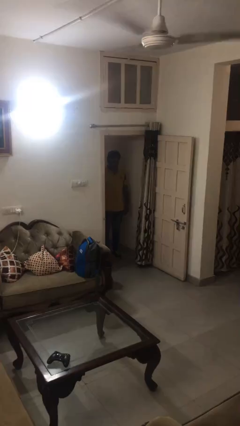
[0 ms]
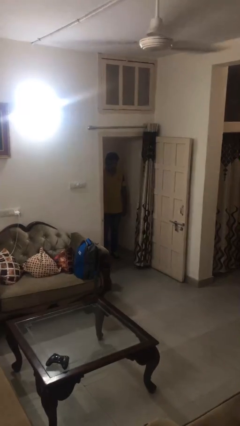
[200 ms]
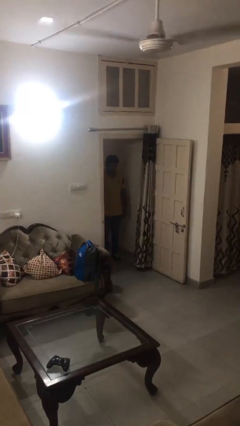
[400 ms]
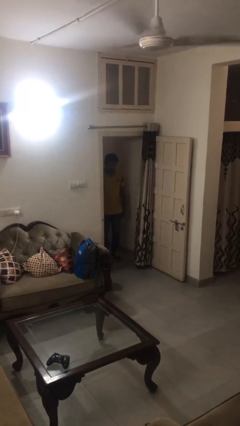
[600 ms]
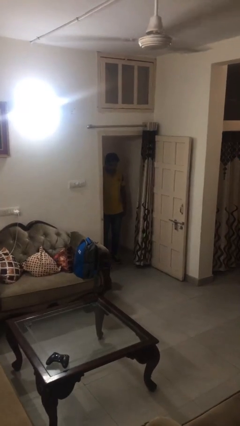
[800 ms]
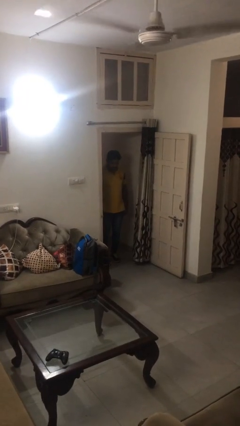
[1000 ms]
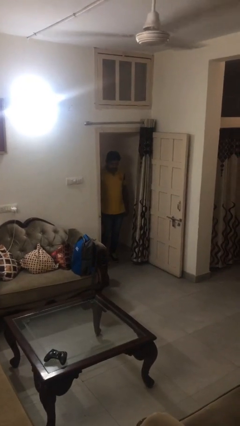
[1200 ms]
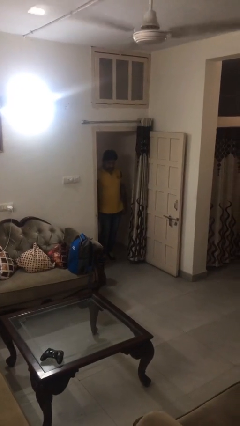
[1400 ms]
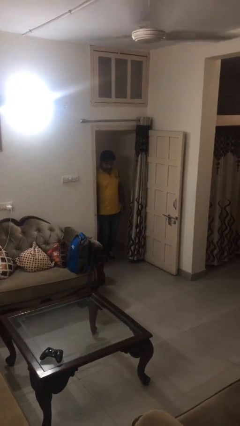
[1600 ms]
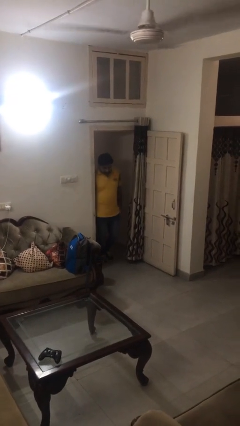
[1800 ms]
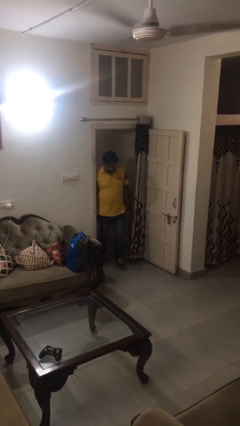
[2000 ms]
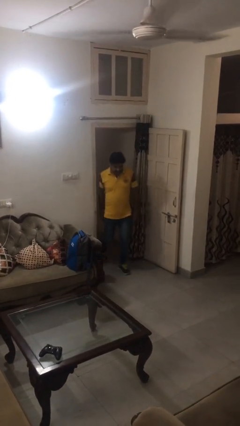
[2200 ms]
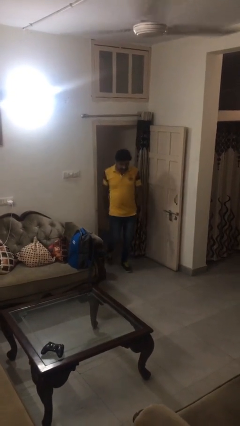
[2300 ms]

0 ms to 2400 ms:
person bumps into wall

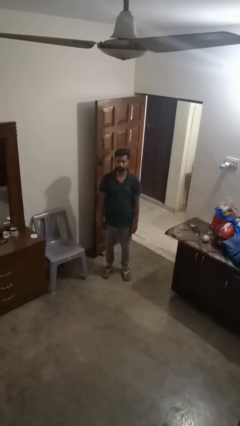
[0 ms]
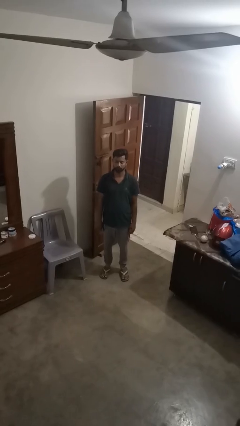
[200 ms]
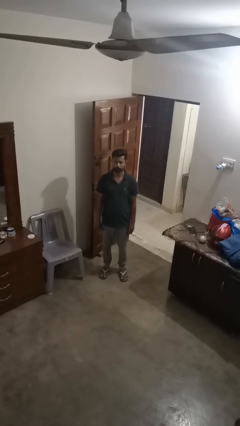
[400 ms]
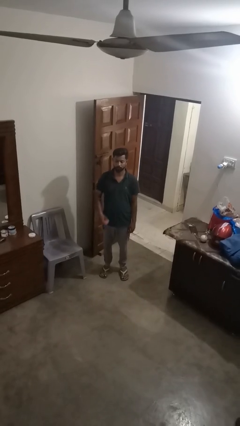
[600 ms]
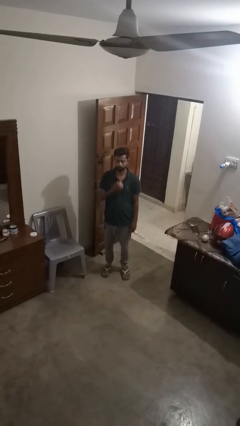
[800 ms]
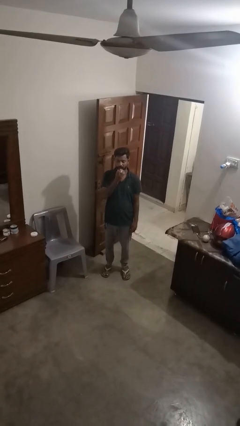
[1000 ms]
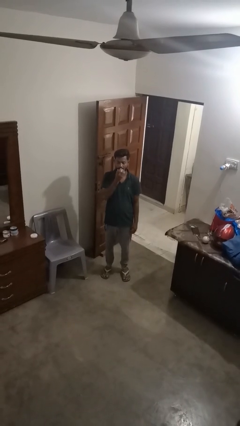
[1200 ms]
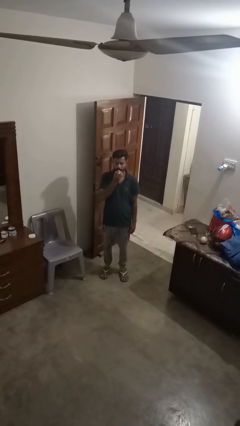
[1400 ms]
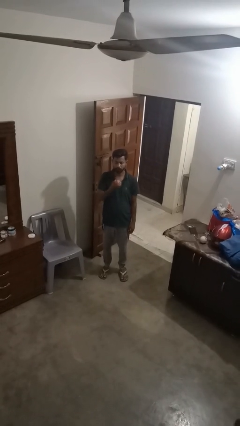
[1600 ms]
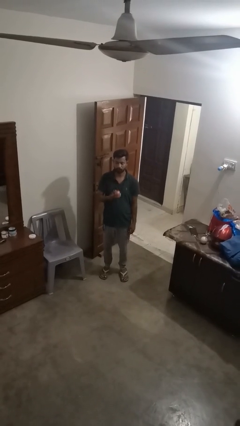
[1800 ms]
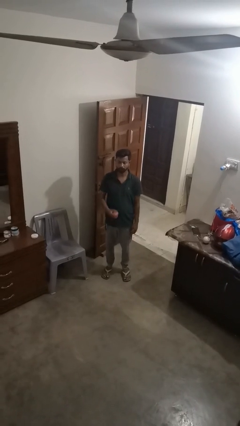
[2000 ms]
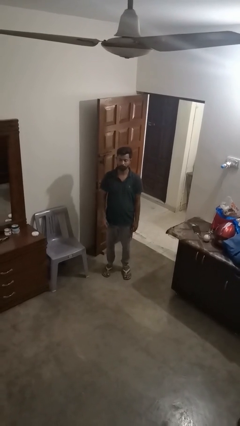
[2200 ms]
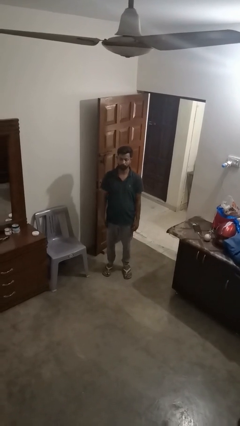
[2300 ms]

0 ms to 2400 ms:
person eats apple

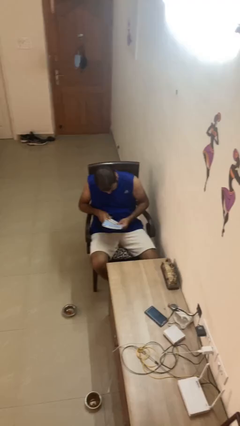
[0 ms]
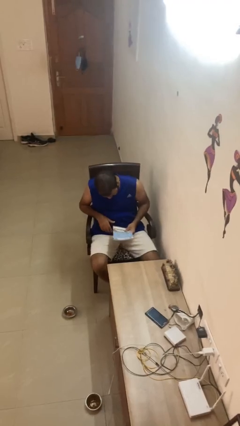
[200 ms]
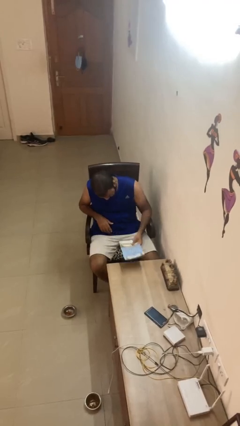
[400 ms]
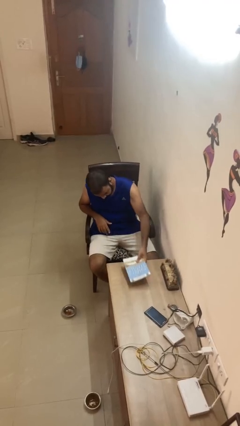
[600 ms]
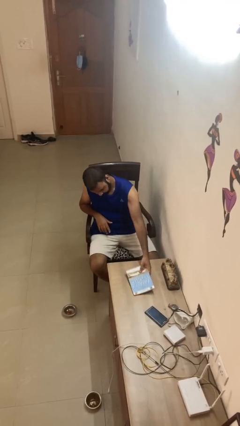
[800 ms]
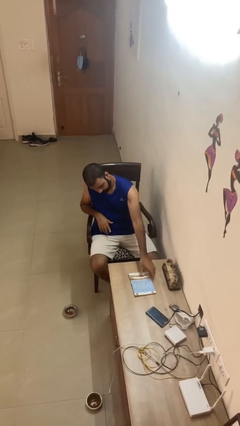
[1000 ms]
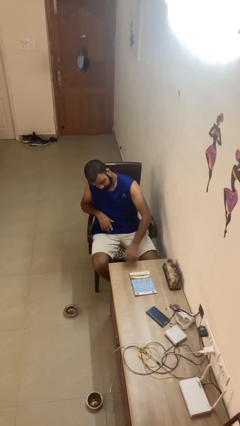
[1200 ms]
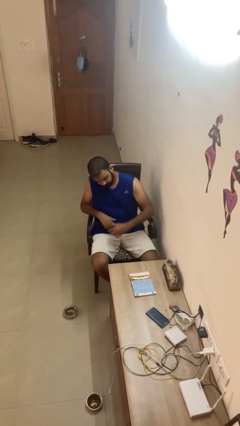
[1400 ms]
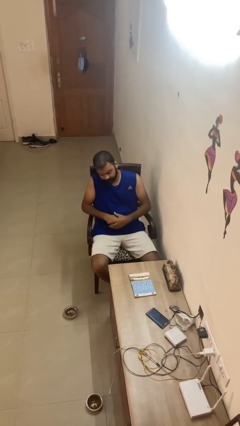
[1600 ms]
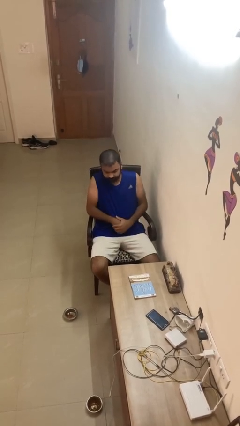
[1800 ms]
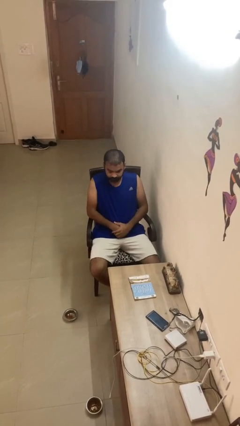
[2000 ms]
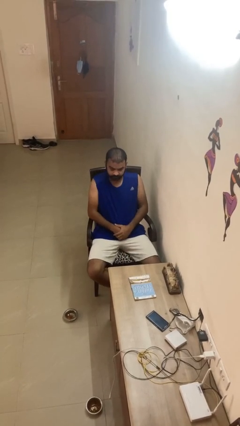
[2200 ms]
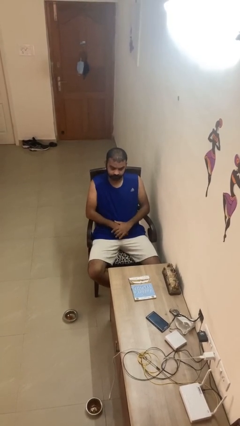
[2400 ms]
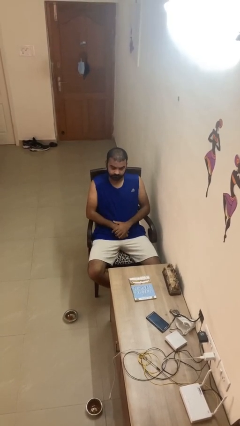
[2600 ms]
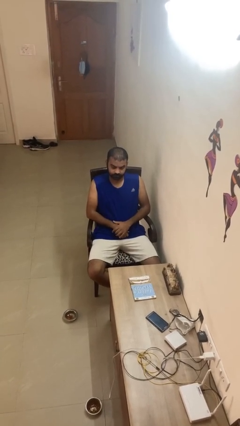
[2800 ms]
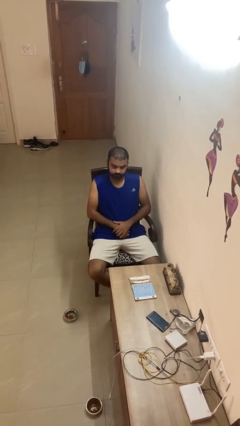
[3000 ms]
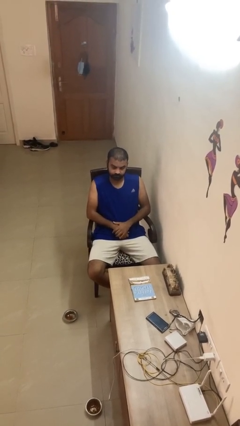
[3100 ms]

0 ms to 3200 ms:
person puts down object on table

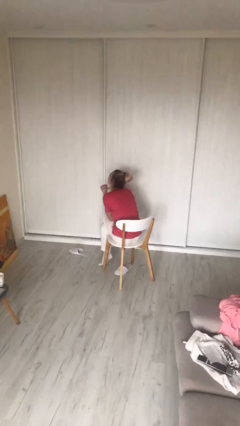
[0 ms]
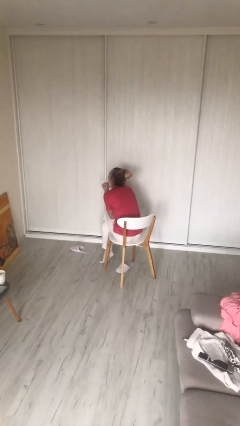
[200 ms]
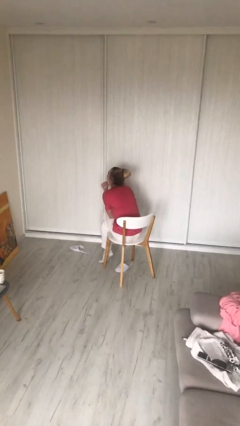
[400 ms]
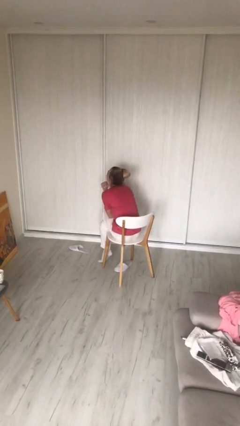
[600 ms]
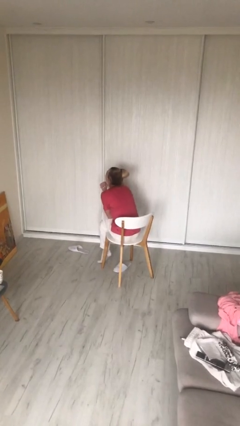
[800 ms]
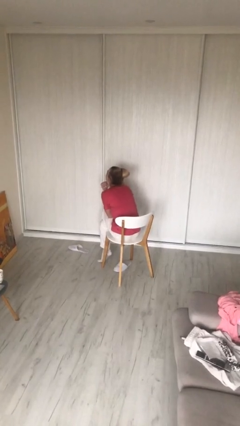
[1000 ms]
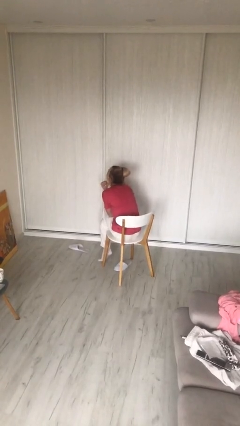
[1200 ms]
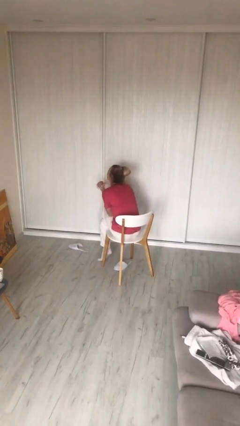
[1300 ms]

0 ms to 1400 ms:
person strokes chin

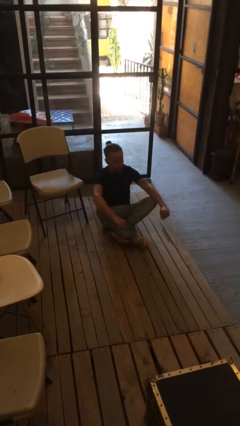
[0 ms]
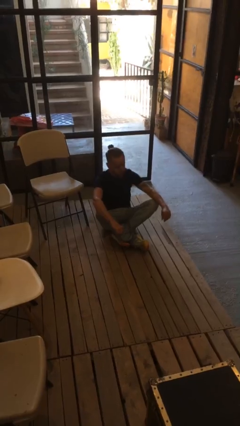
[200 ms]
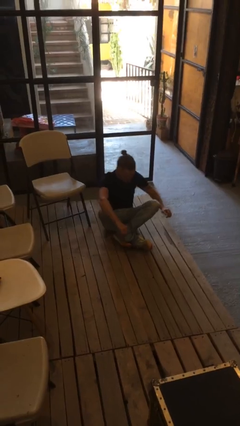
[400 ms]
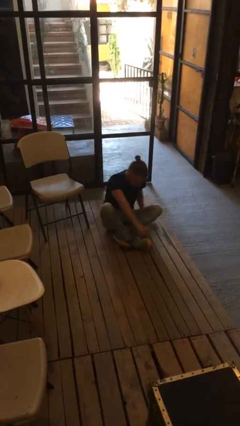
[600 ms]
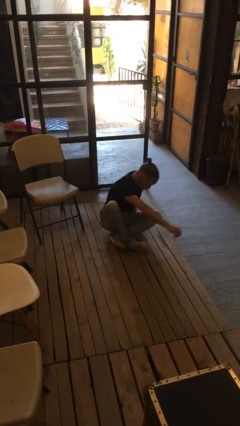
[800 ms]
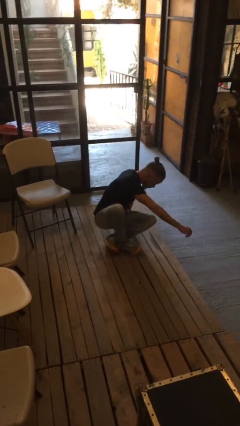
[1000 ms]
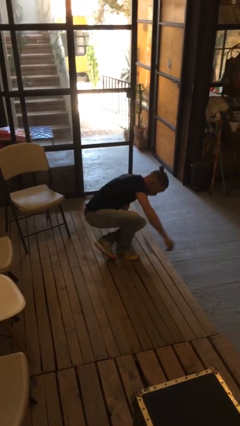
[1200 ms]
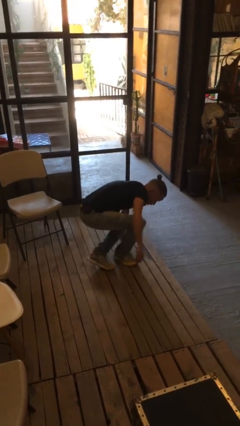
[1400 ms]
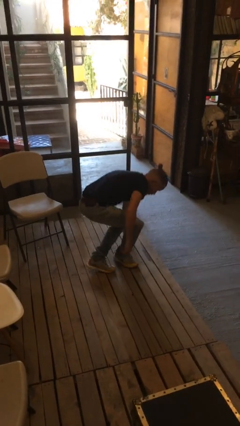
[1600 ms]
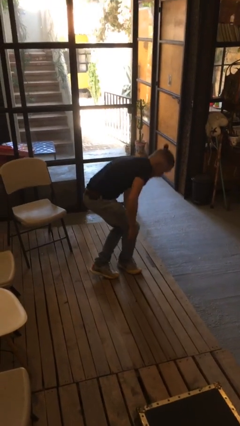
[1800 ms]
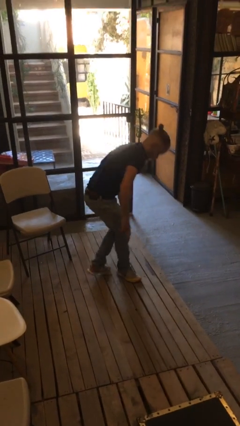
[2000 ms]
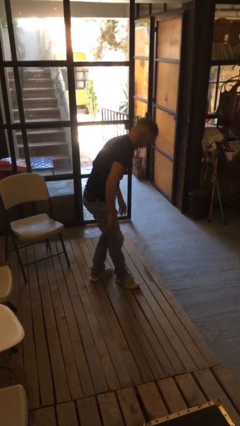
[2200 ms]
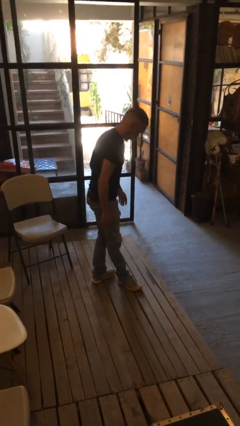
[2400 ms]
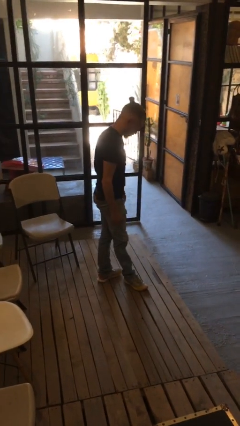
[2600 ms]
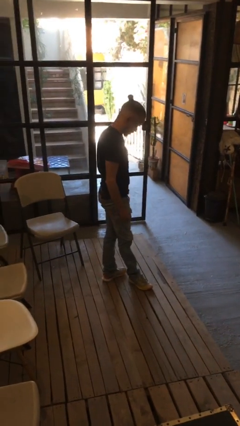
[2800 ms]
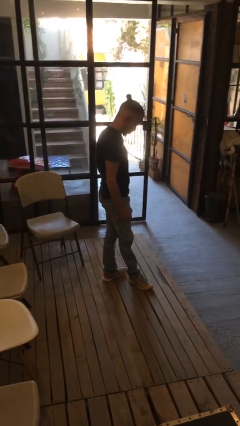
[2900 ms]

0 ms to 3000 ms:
person stands up from floor

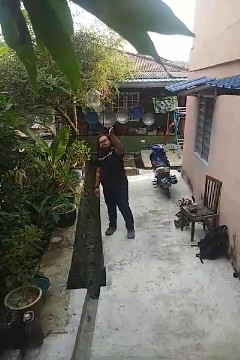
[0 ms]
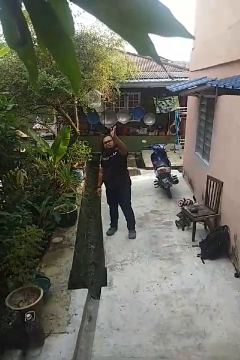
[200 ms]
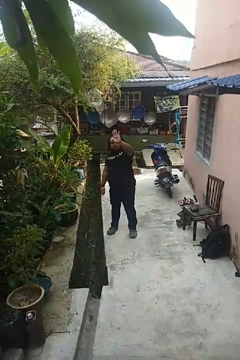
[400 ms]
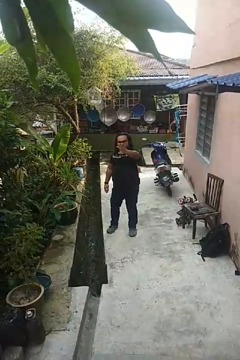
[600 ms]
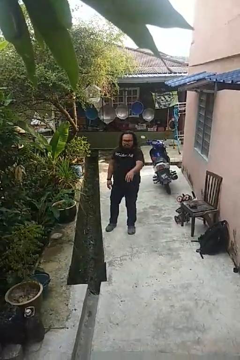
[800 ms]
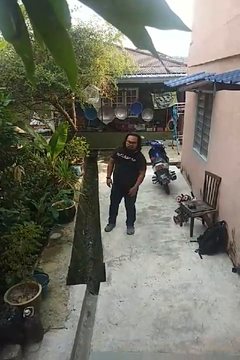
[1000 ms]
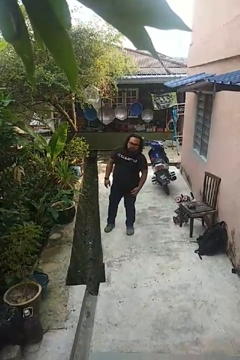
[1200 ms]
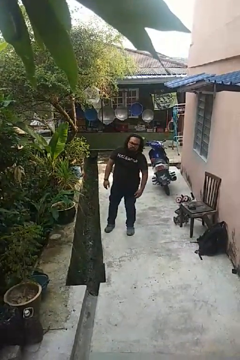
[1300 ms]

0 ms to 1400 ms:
person gestures swipe down

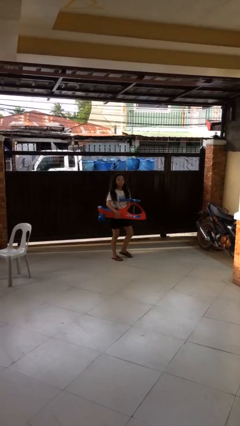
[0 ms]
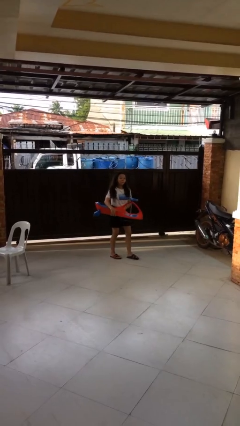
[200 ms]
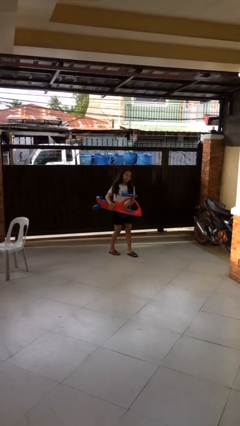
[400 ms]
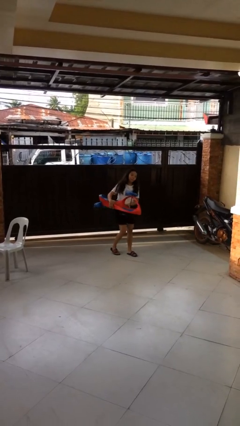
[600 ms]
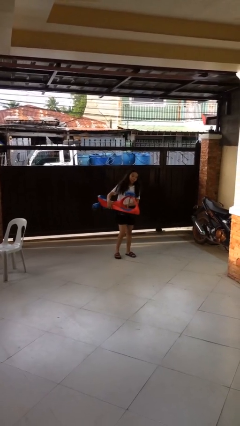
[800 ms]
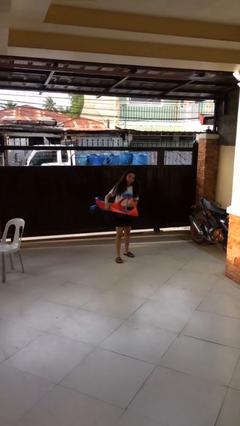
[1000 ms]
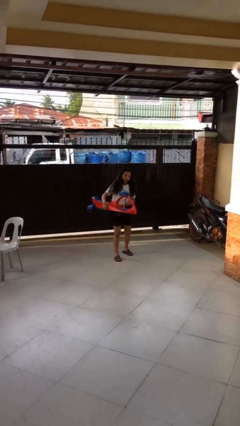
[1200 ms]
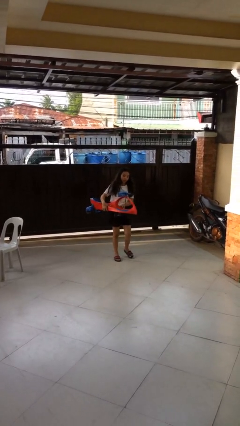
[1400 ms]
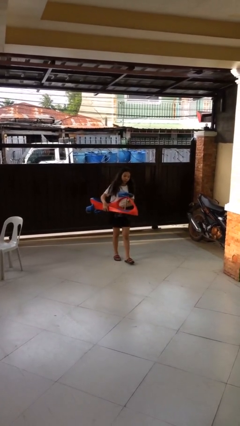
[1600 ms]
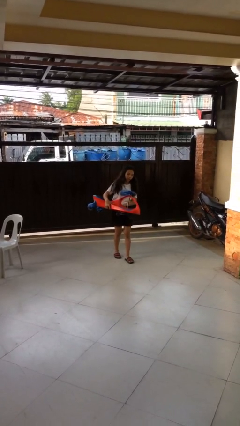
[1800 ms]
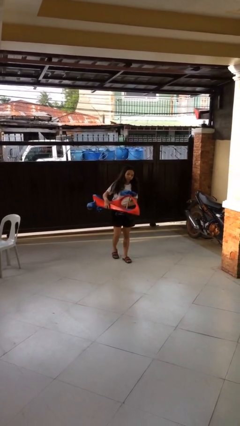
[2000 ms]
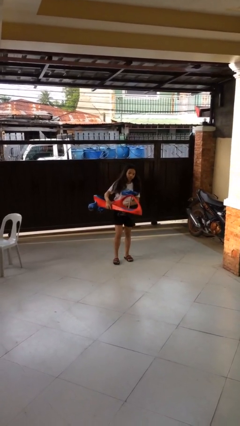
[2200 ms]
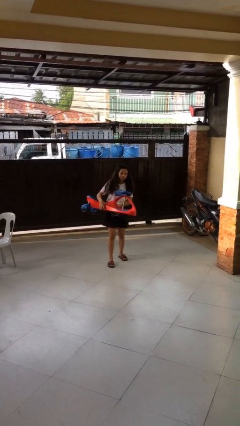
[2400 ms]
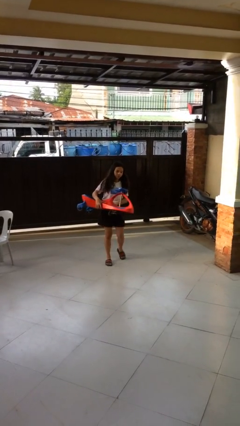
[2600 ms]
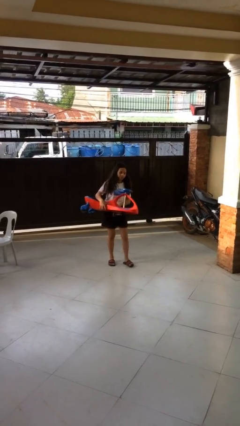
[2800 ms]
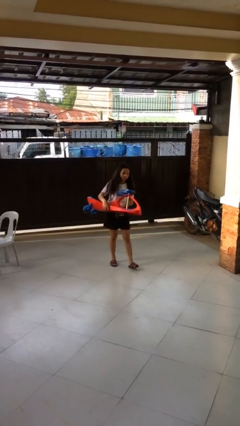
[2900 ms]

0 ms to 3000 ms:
person carries heavy object

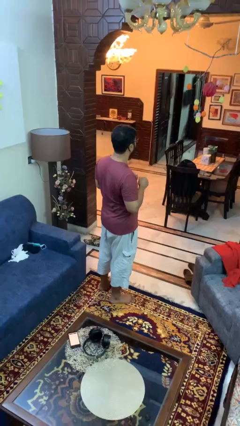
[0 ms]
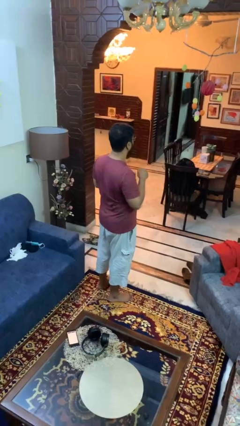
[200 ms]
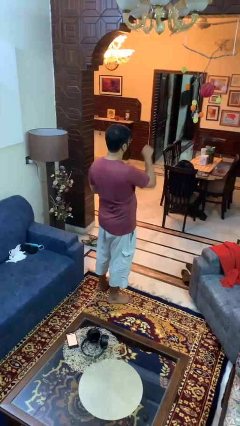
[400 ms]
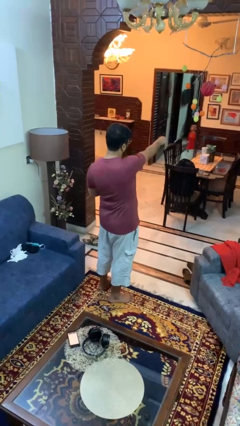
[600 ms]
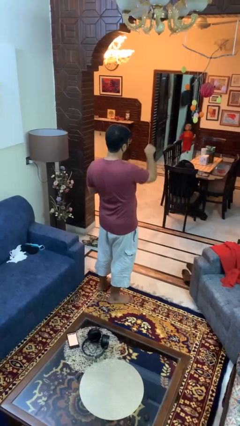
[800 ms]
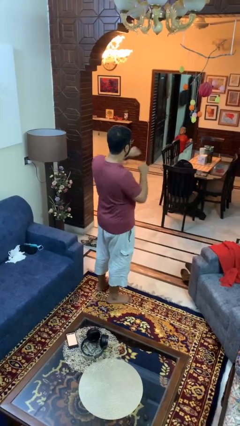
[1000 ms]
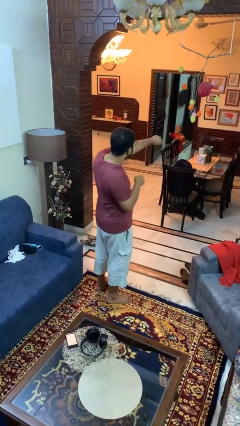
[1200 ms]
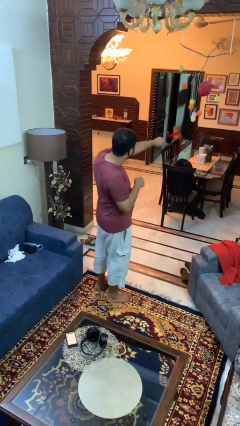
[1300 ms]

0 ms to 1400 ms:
person punches
